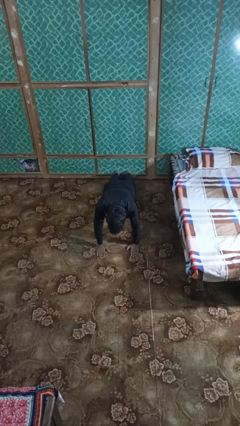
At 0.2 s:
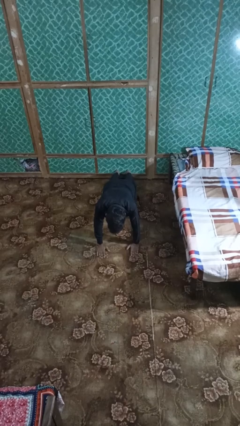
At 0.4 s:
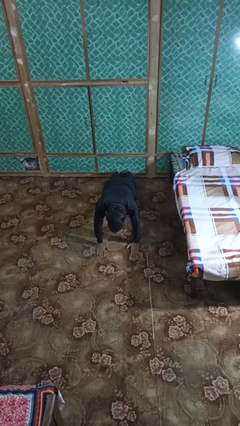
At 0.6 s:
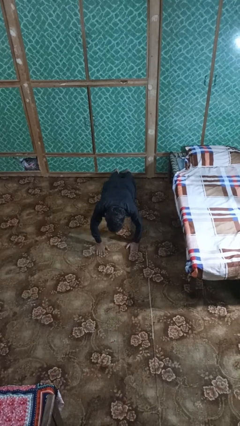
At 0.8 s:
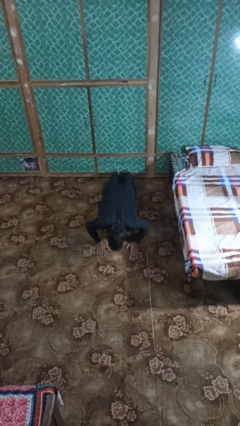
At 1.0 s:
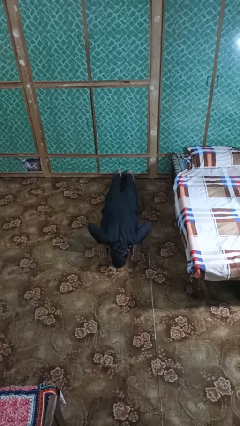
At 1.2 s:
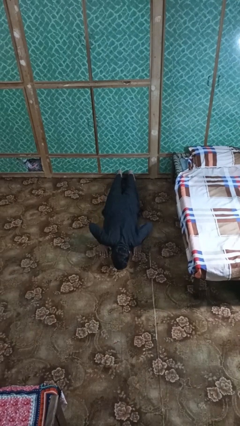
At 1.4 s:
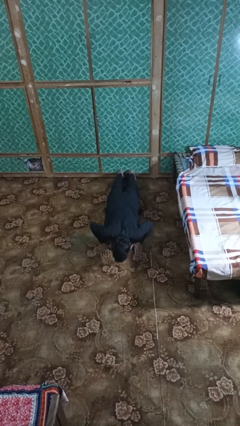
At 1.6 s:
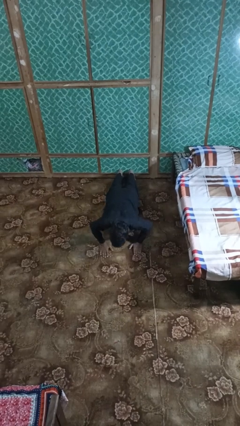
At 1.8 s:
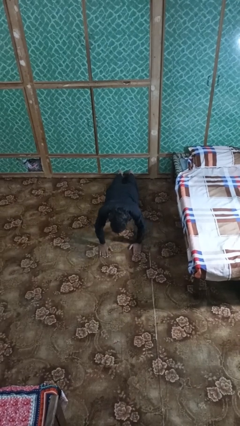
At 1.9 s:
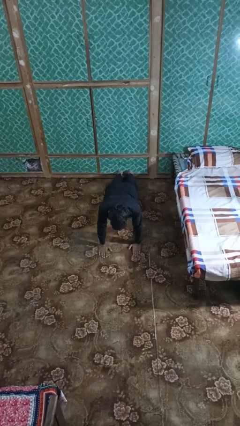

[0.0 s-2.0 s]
person exercises with pushup

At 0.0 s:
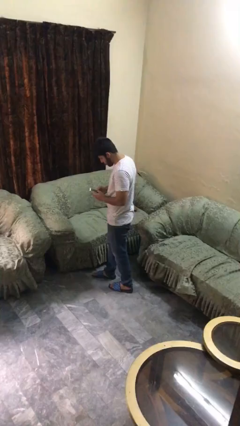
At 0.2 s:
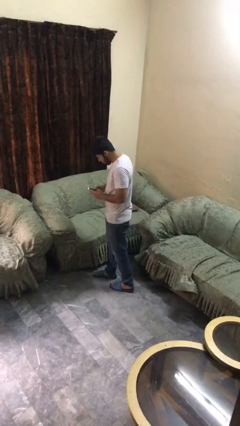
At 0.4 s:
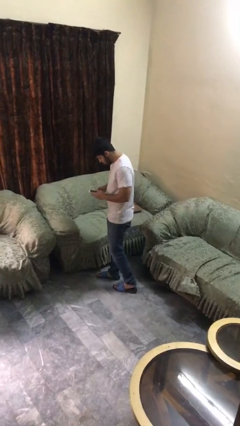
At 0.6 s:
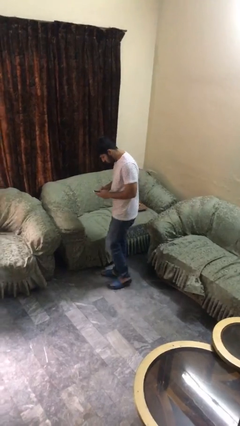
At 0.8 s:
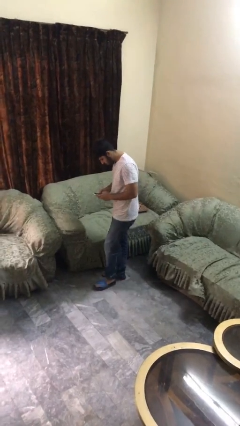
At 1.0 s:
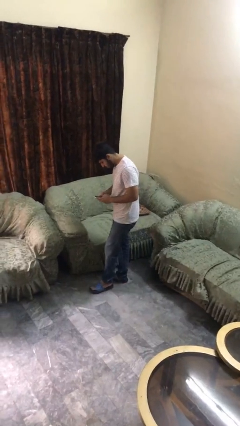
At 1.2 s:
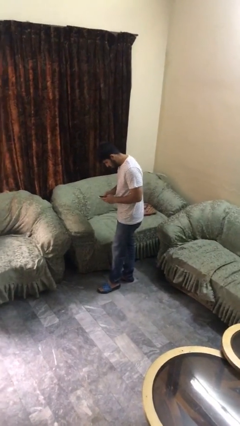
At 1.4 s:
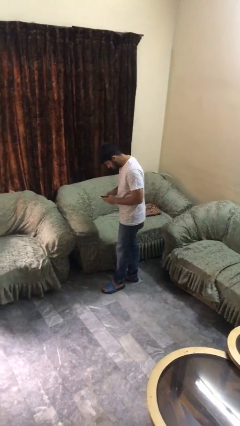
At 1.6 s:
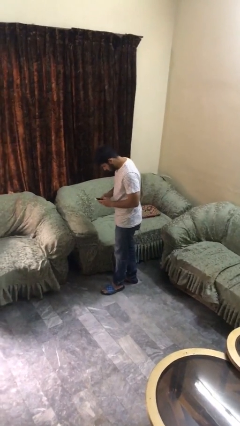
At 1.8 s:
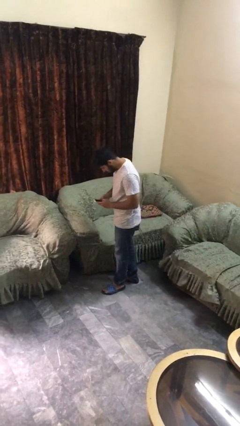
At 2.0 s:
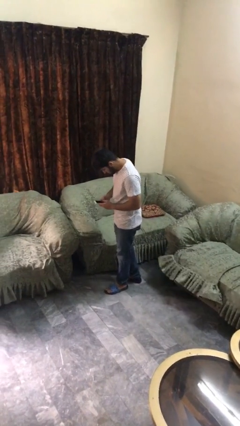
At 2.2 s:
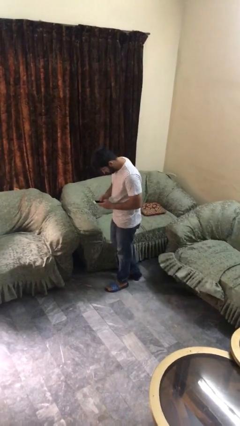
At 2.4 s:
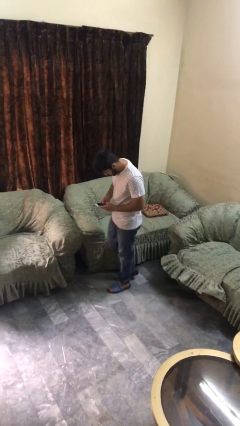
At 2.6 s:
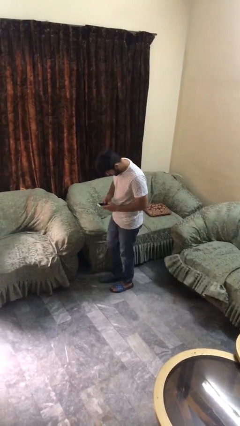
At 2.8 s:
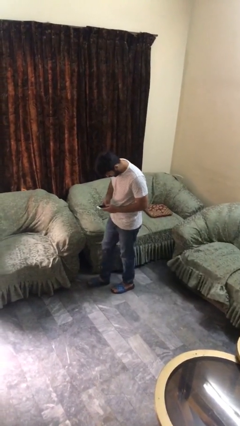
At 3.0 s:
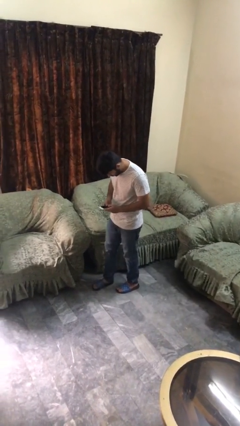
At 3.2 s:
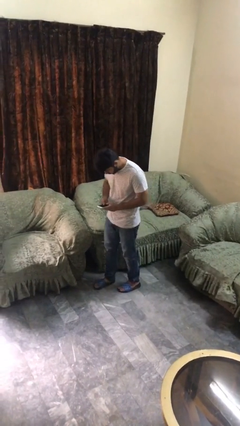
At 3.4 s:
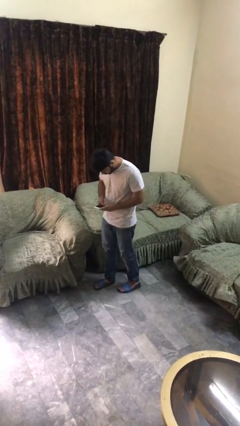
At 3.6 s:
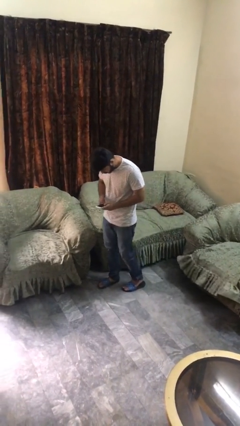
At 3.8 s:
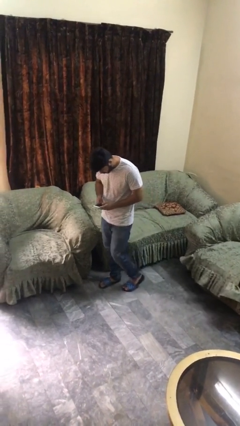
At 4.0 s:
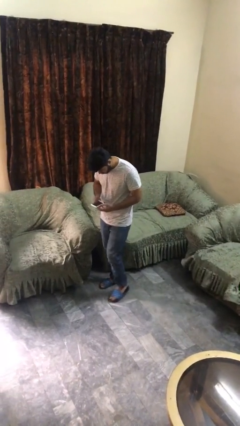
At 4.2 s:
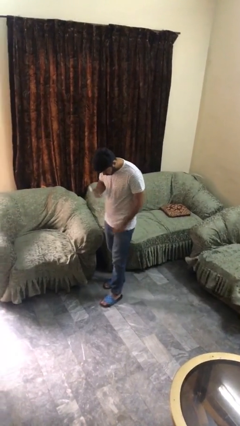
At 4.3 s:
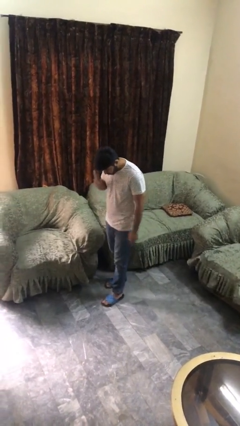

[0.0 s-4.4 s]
person texts on phone

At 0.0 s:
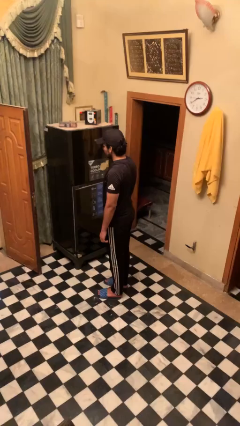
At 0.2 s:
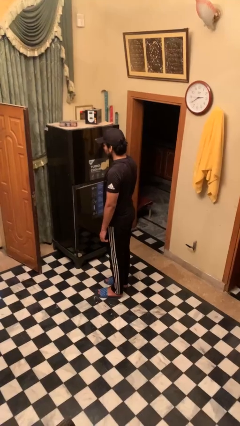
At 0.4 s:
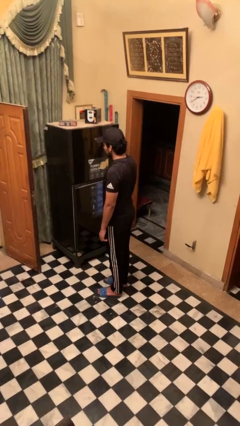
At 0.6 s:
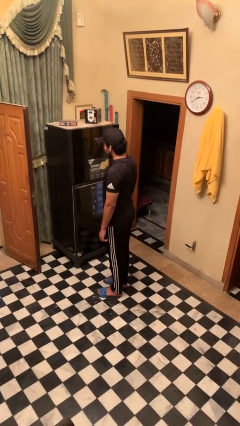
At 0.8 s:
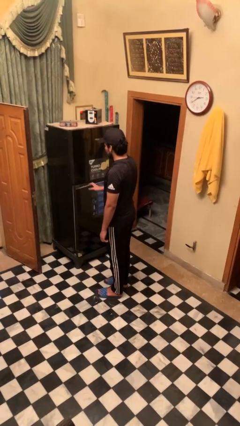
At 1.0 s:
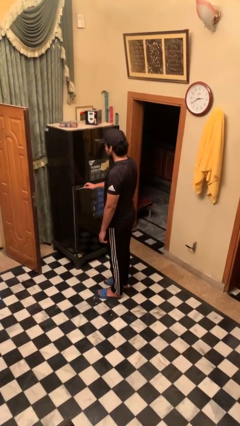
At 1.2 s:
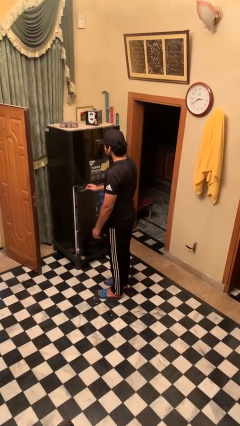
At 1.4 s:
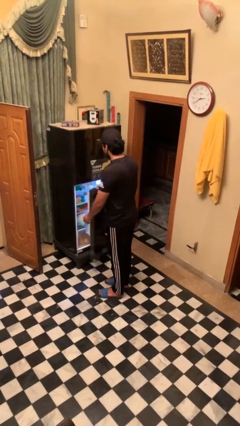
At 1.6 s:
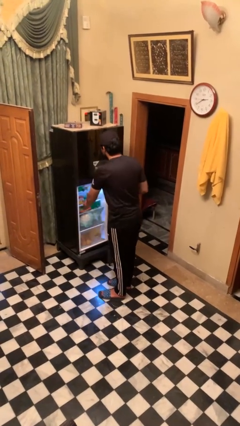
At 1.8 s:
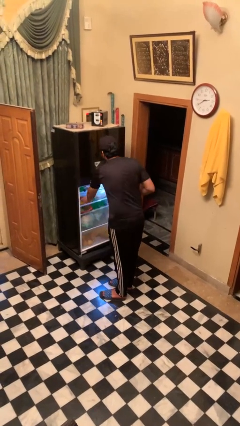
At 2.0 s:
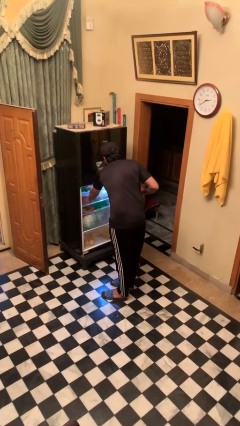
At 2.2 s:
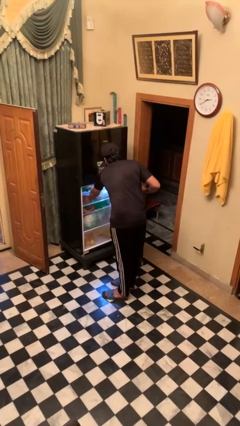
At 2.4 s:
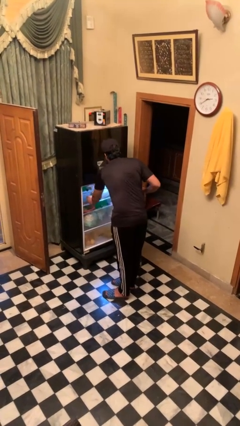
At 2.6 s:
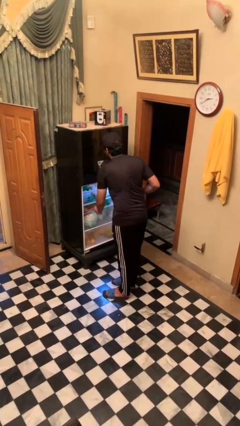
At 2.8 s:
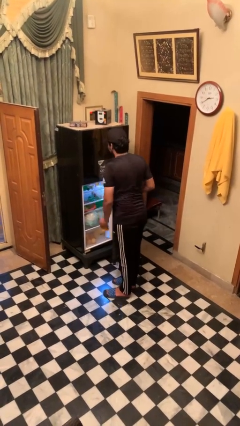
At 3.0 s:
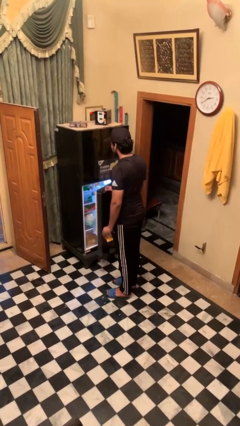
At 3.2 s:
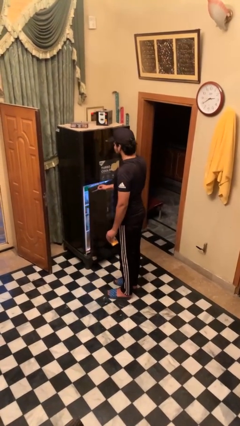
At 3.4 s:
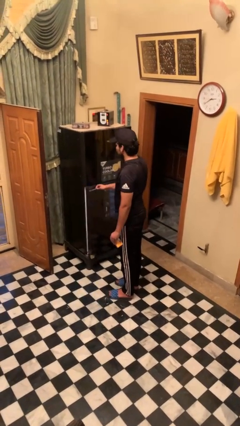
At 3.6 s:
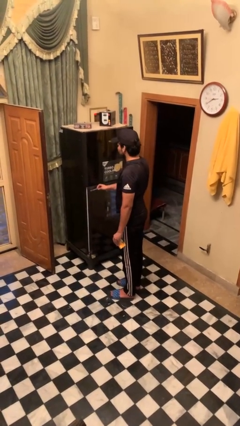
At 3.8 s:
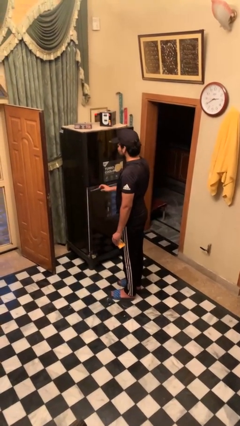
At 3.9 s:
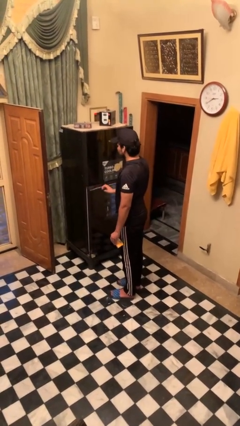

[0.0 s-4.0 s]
person takes object from refrigerator

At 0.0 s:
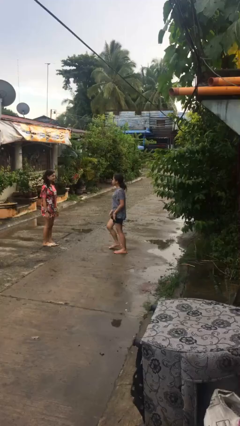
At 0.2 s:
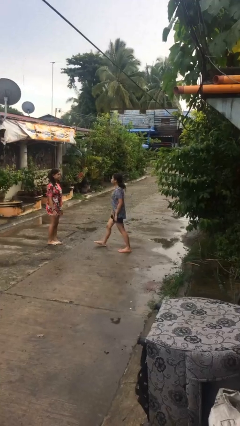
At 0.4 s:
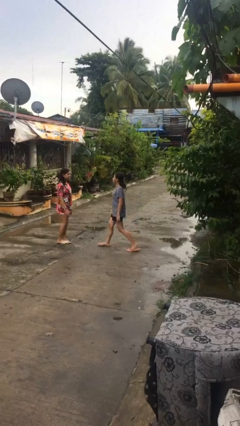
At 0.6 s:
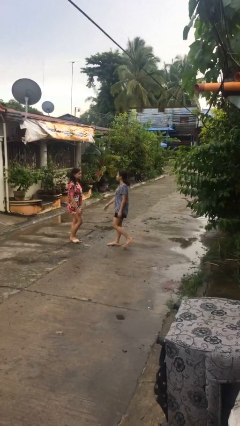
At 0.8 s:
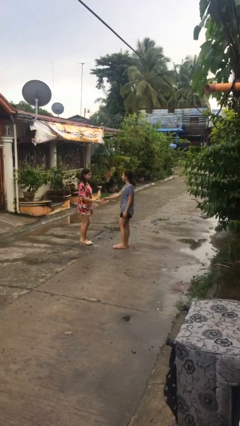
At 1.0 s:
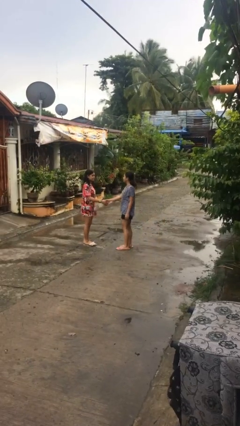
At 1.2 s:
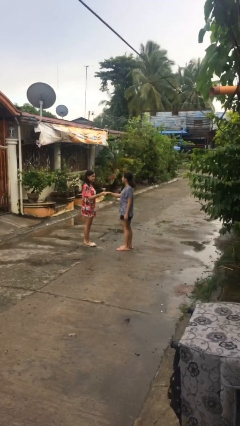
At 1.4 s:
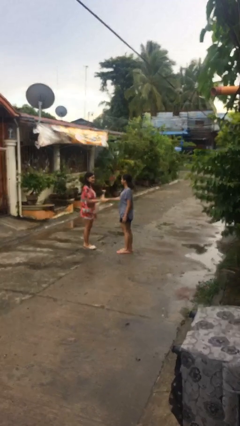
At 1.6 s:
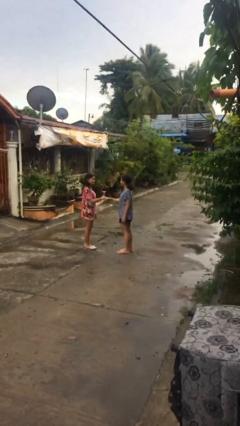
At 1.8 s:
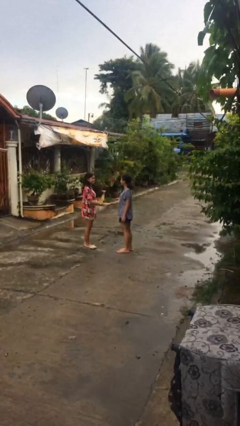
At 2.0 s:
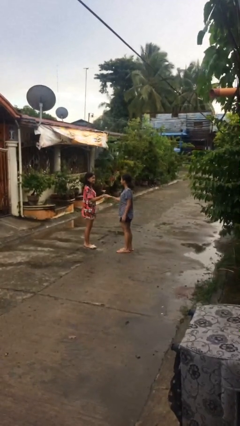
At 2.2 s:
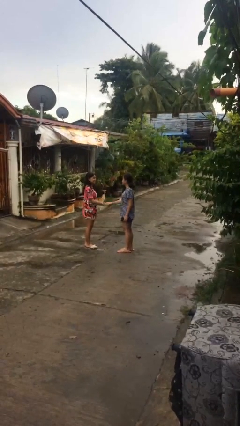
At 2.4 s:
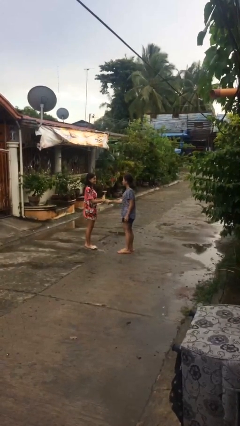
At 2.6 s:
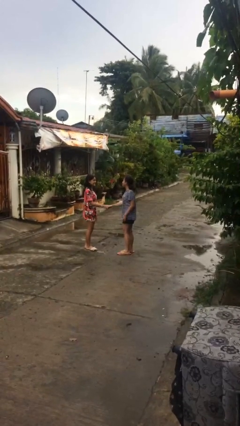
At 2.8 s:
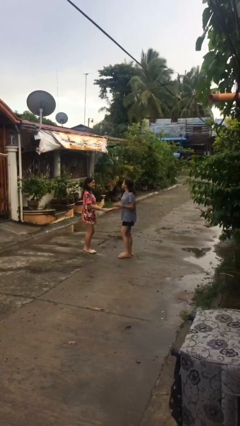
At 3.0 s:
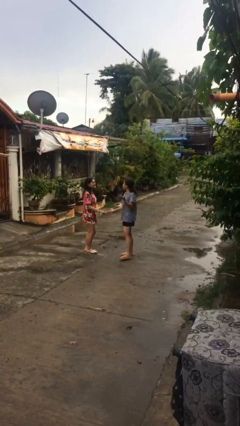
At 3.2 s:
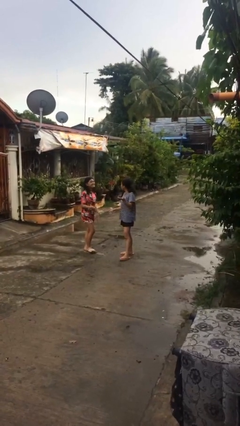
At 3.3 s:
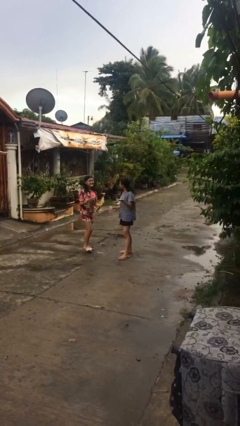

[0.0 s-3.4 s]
person shakes hand

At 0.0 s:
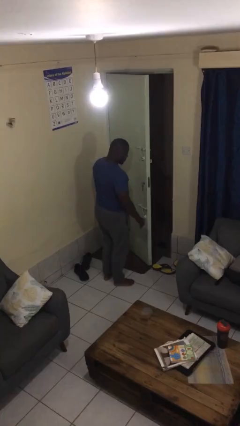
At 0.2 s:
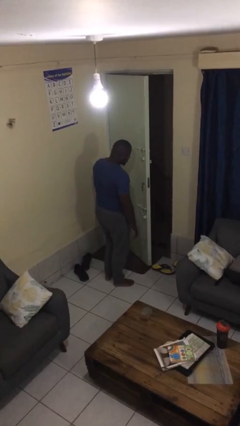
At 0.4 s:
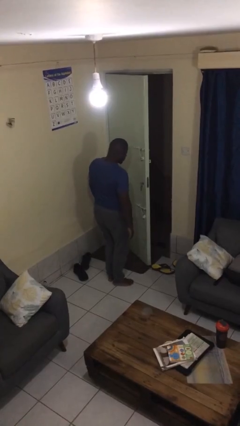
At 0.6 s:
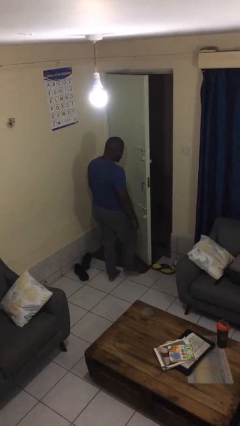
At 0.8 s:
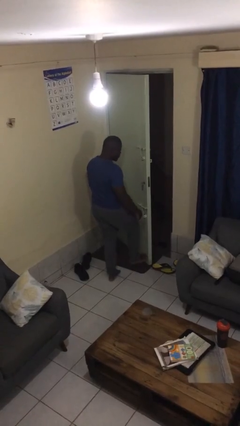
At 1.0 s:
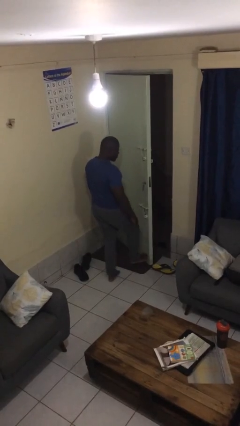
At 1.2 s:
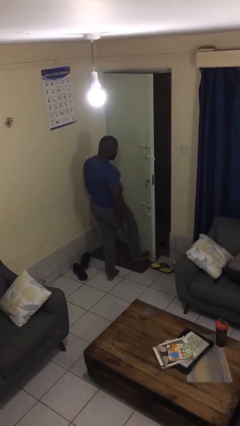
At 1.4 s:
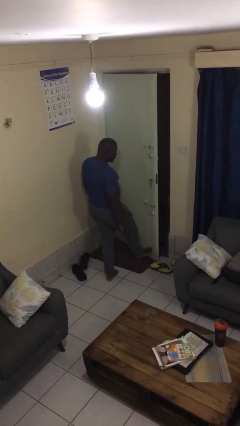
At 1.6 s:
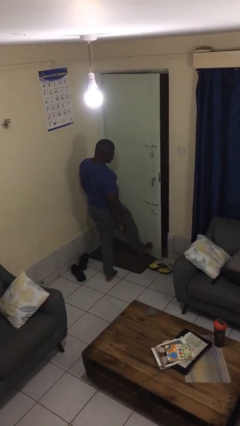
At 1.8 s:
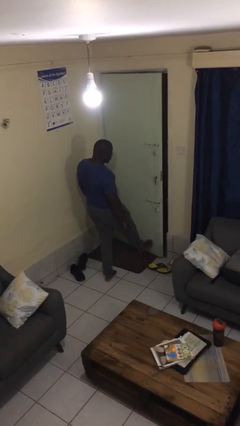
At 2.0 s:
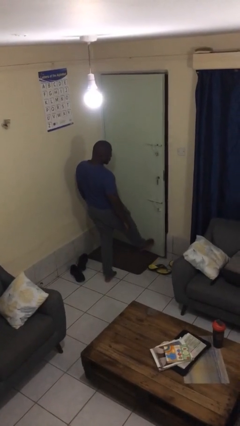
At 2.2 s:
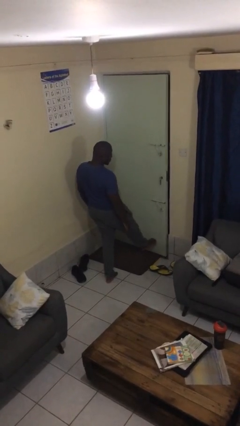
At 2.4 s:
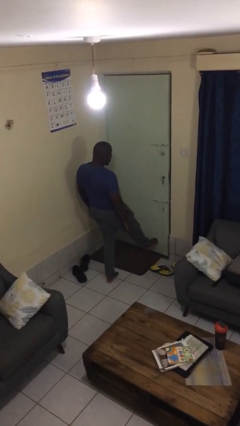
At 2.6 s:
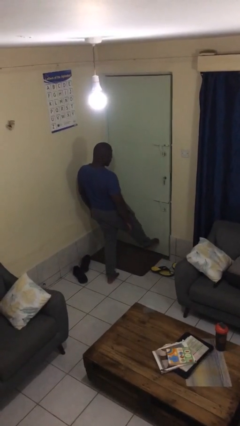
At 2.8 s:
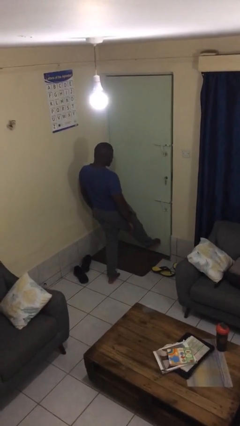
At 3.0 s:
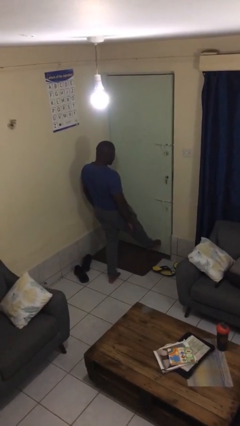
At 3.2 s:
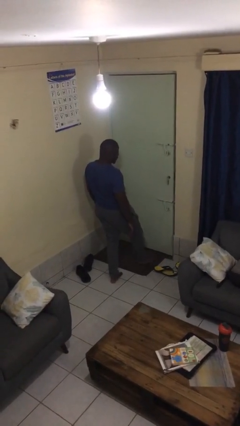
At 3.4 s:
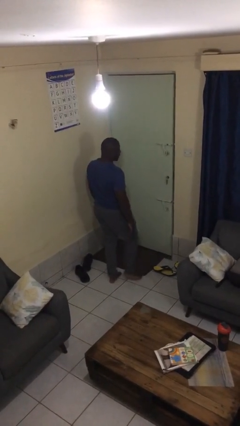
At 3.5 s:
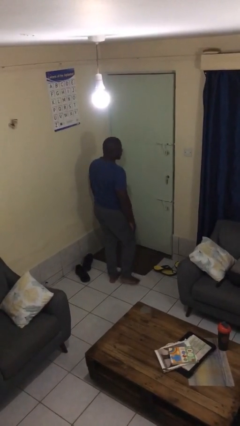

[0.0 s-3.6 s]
person closes door with foot
